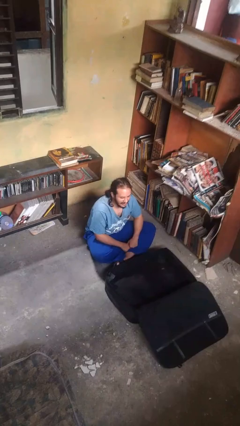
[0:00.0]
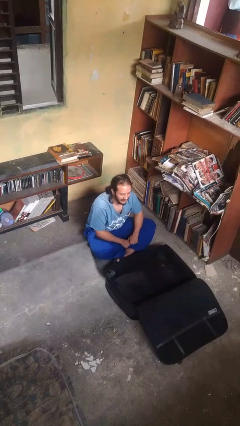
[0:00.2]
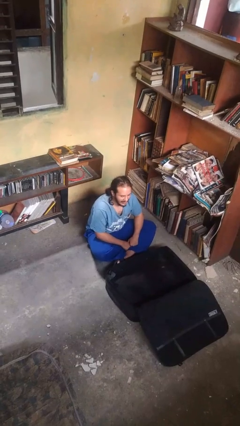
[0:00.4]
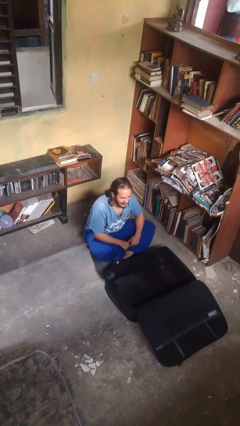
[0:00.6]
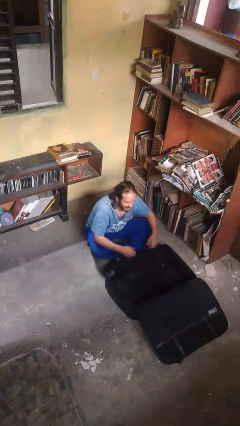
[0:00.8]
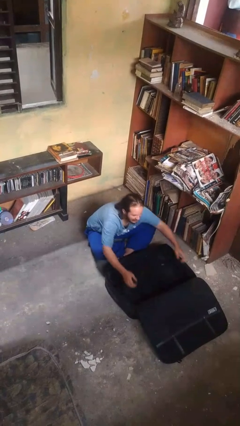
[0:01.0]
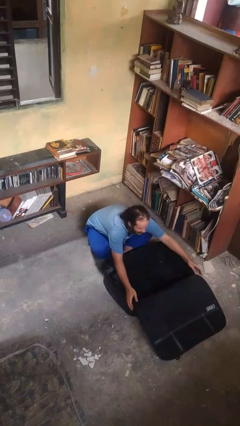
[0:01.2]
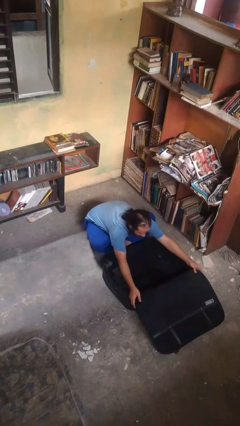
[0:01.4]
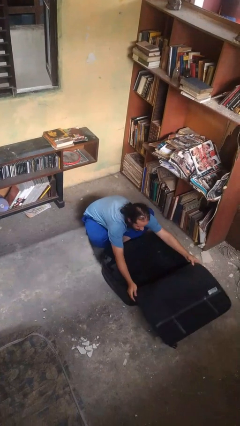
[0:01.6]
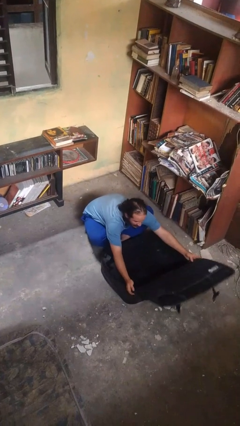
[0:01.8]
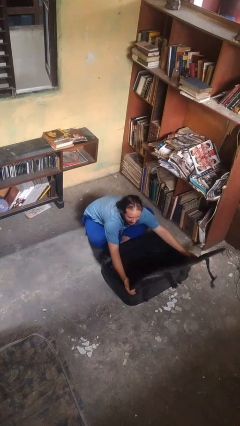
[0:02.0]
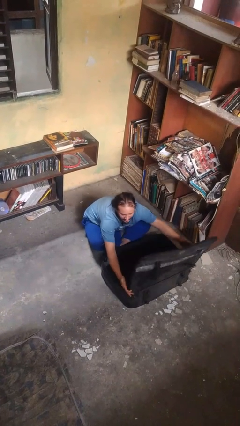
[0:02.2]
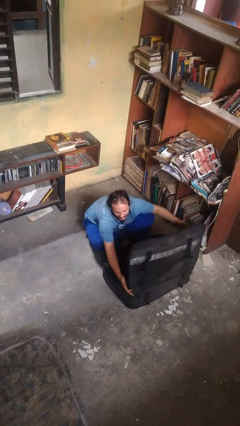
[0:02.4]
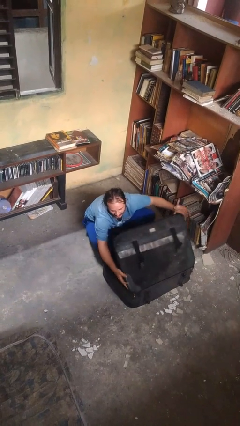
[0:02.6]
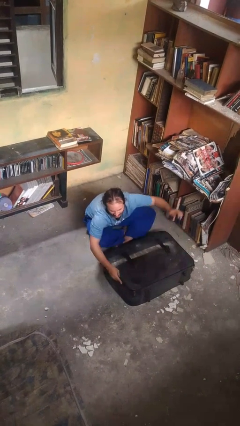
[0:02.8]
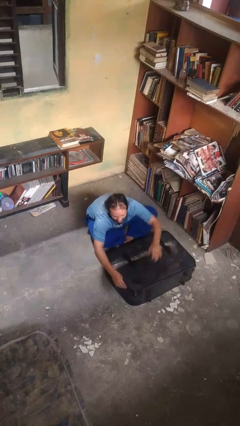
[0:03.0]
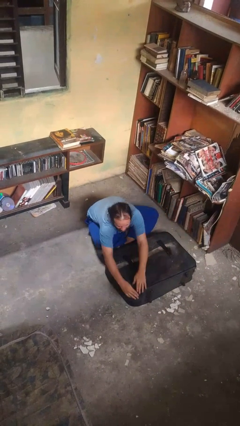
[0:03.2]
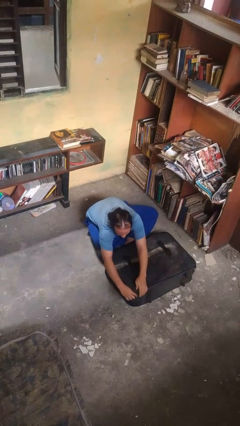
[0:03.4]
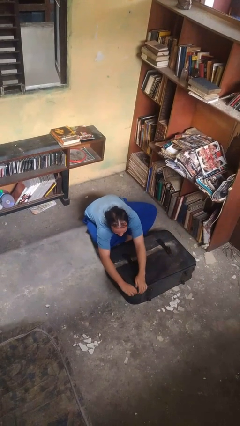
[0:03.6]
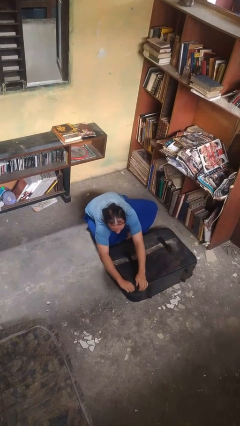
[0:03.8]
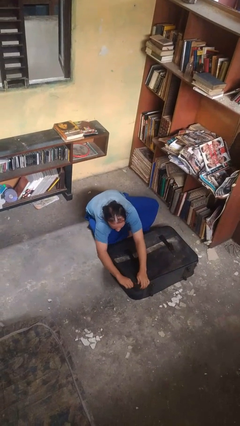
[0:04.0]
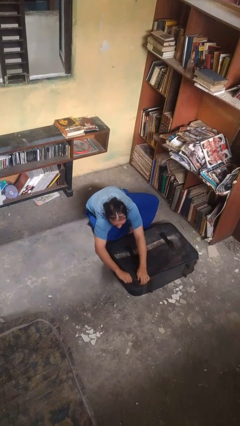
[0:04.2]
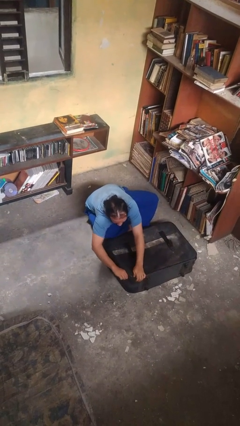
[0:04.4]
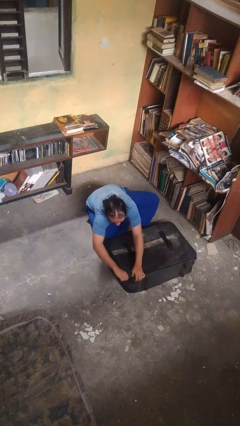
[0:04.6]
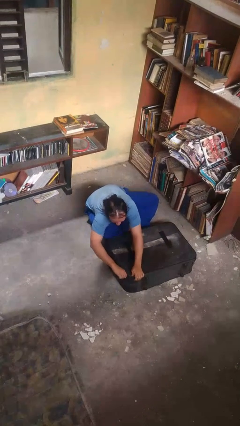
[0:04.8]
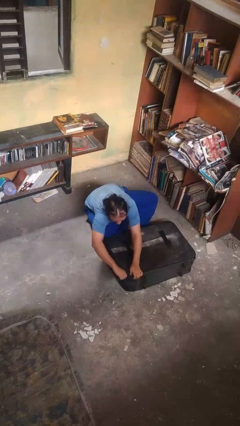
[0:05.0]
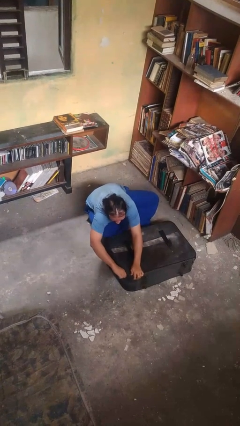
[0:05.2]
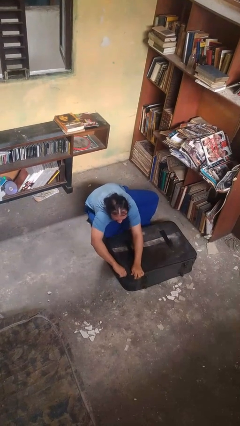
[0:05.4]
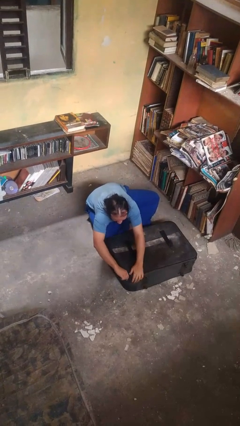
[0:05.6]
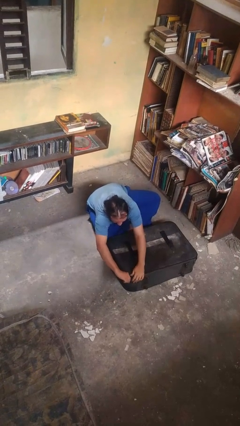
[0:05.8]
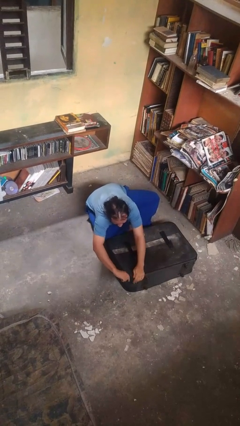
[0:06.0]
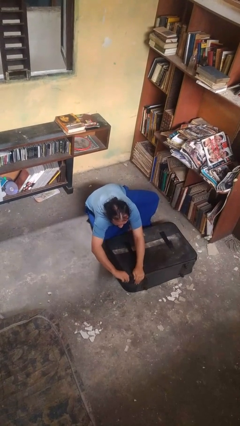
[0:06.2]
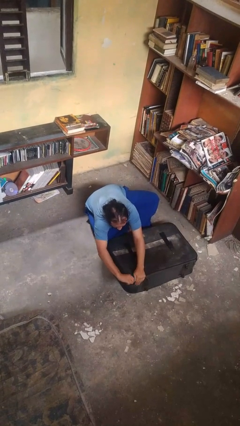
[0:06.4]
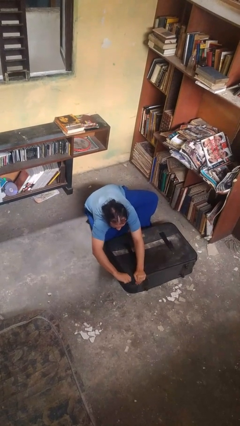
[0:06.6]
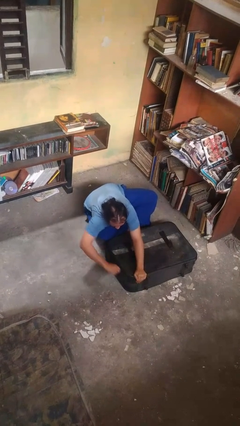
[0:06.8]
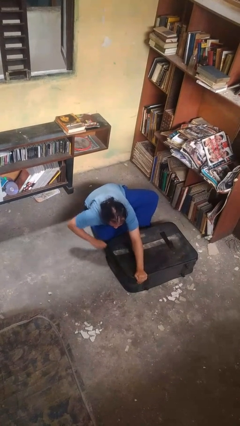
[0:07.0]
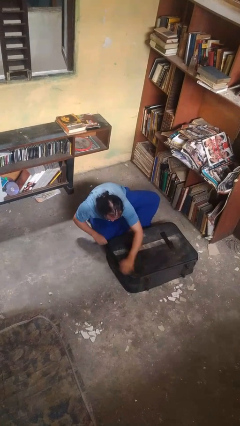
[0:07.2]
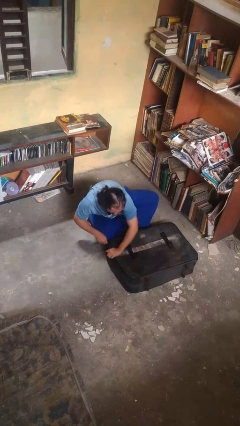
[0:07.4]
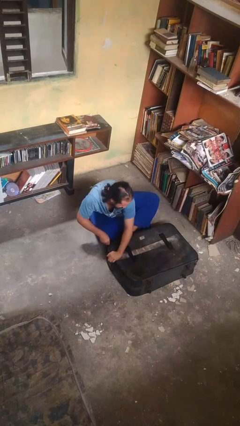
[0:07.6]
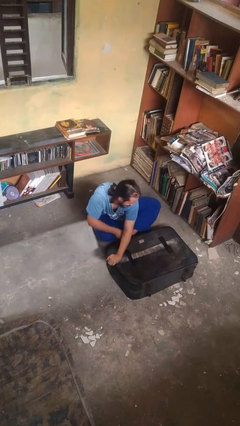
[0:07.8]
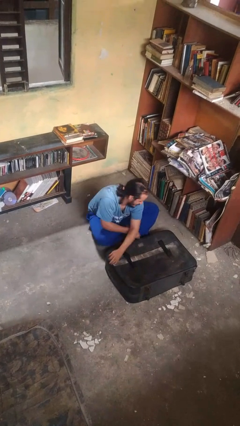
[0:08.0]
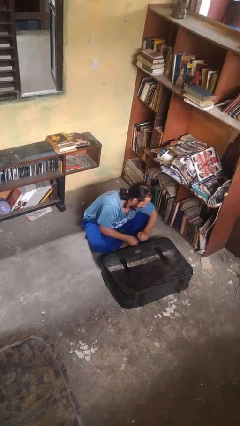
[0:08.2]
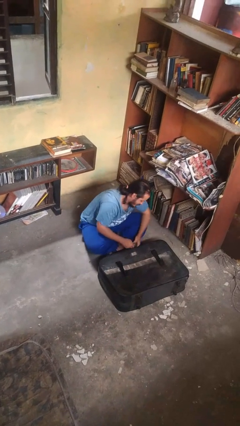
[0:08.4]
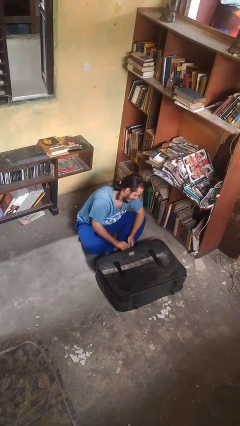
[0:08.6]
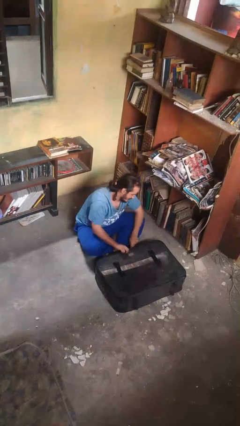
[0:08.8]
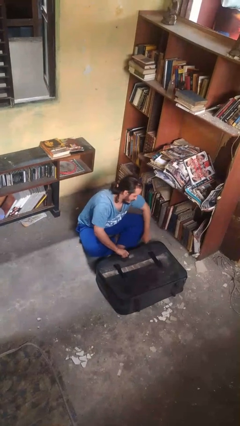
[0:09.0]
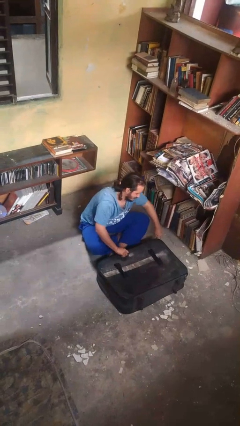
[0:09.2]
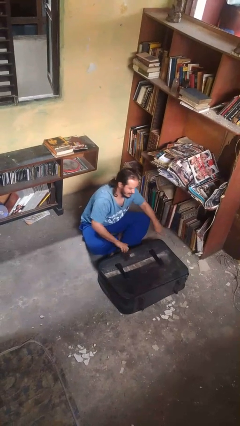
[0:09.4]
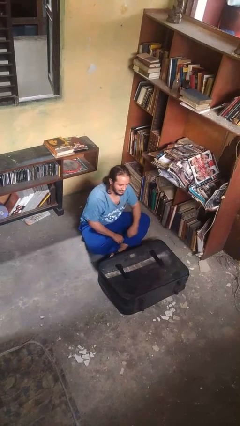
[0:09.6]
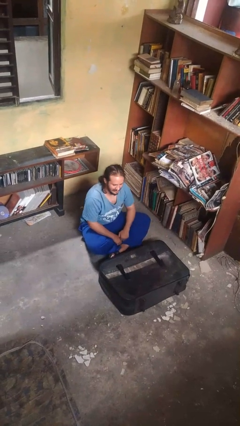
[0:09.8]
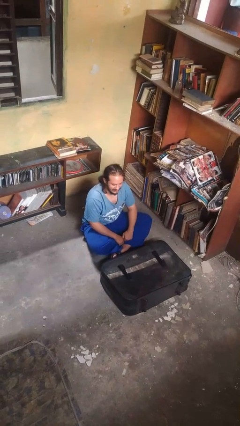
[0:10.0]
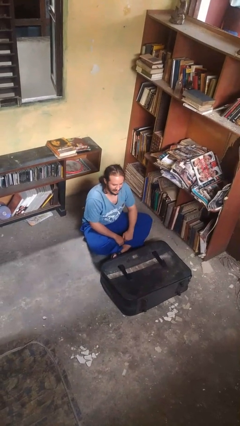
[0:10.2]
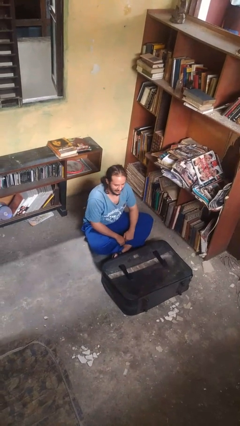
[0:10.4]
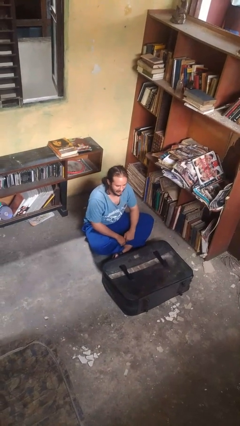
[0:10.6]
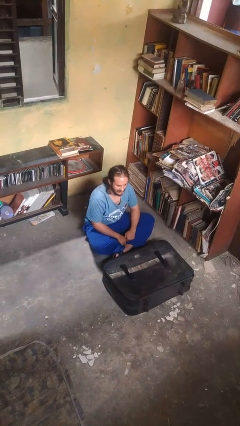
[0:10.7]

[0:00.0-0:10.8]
person closes suitcase

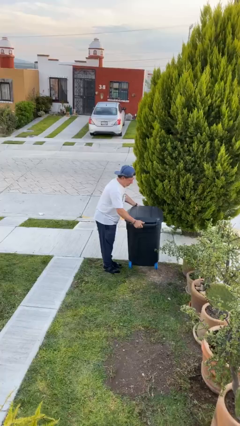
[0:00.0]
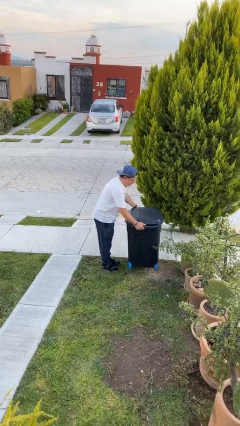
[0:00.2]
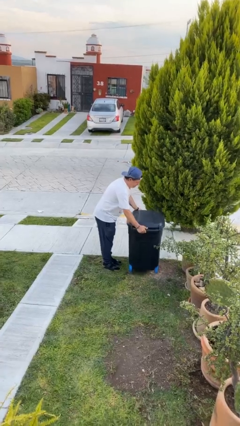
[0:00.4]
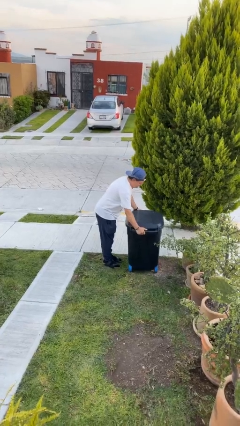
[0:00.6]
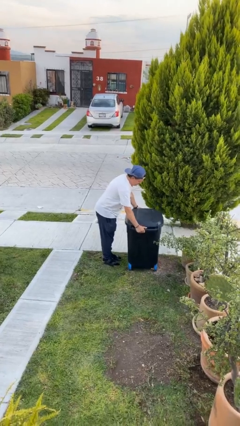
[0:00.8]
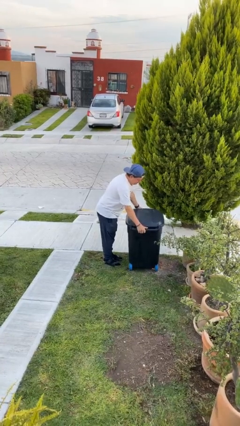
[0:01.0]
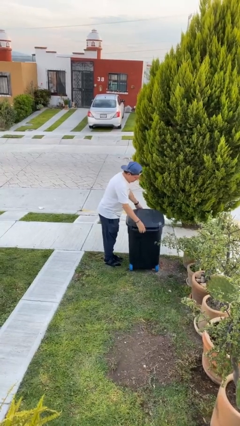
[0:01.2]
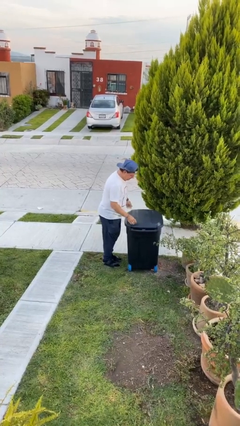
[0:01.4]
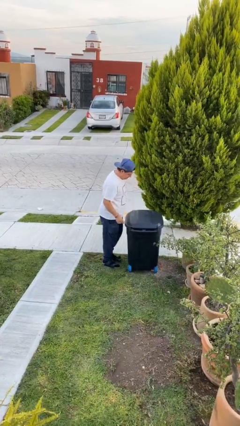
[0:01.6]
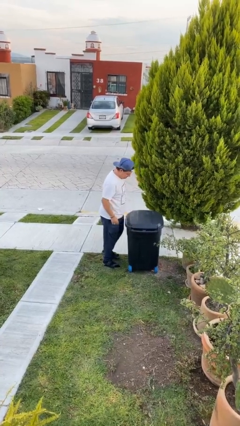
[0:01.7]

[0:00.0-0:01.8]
person puts down object on floor

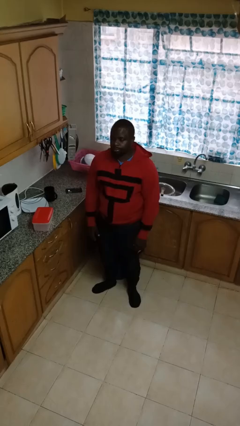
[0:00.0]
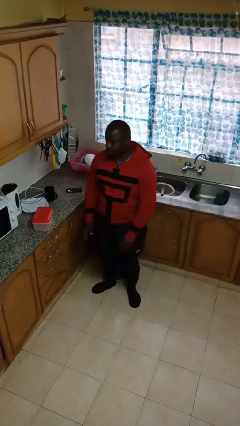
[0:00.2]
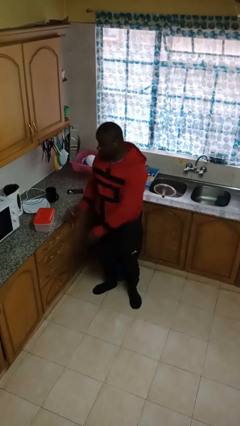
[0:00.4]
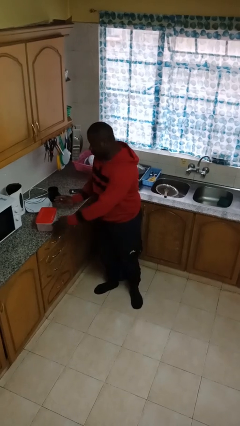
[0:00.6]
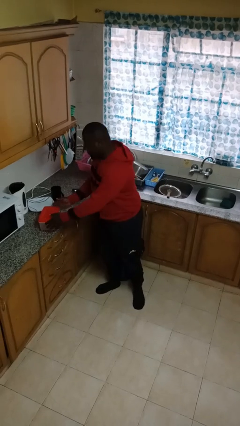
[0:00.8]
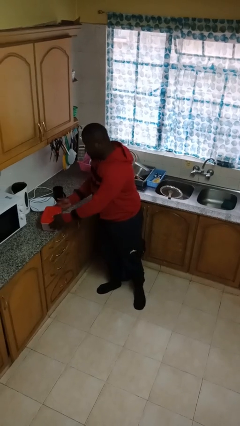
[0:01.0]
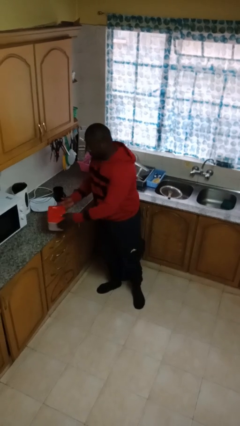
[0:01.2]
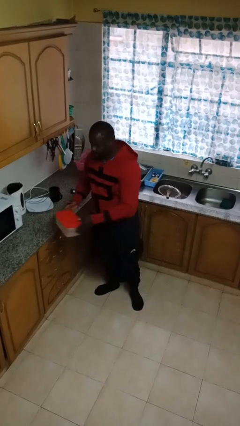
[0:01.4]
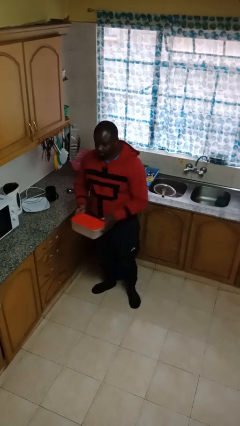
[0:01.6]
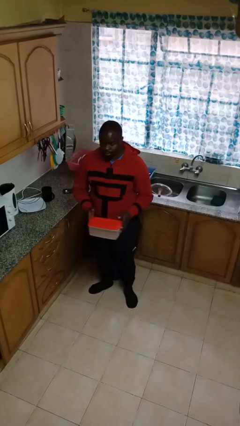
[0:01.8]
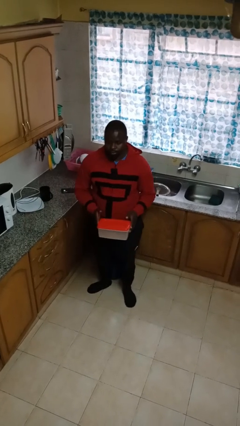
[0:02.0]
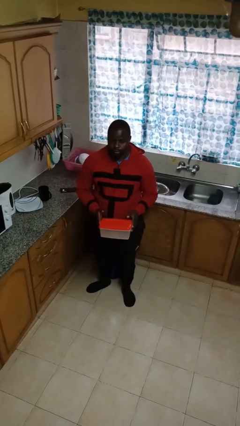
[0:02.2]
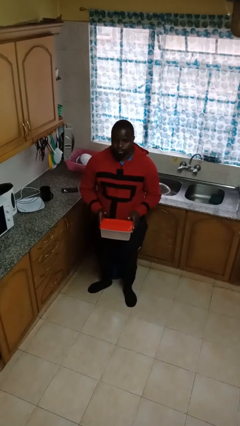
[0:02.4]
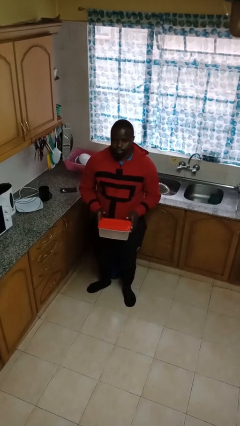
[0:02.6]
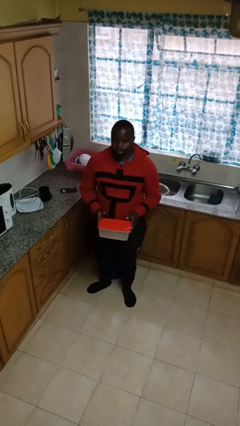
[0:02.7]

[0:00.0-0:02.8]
person picks up object from countertop

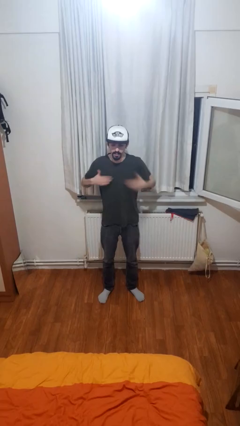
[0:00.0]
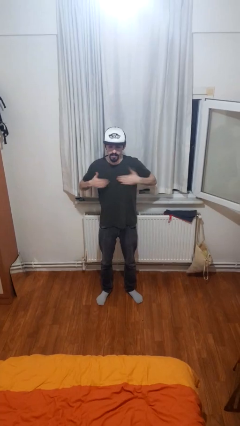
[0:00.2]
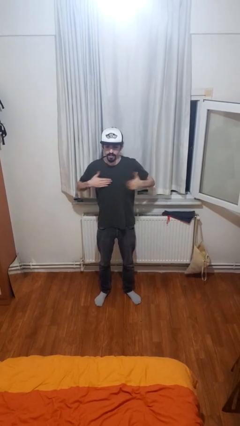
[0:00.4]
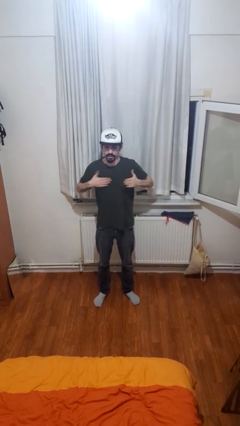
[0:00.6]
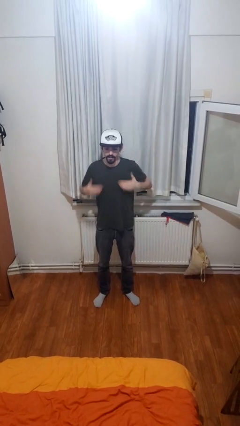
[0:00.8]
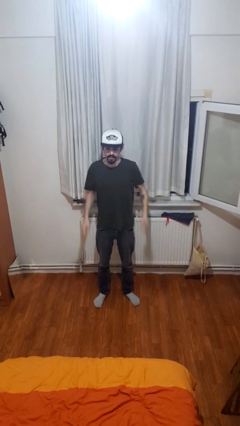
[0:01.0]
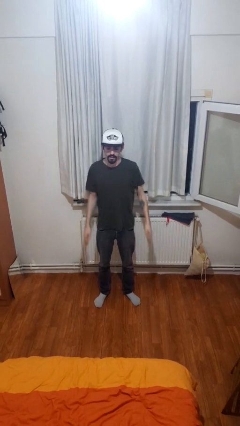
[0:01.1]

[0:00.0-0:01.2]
person drums on chest

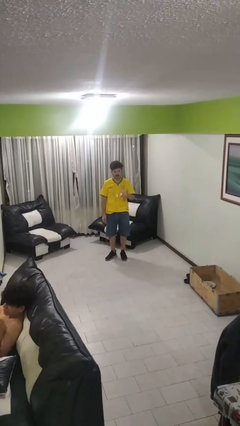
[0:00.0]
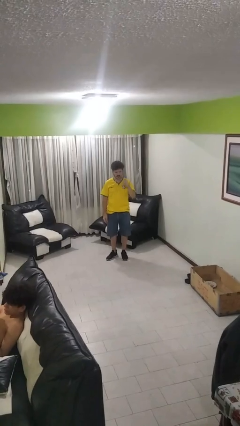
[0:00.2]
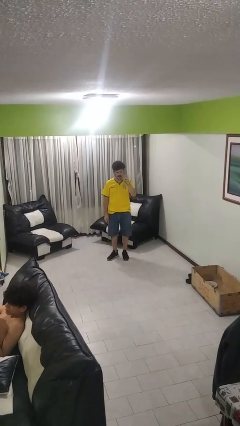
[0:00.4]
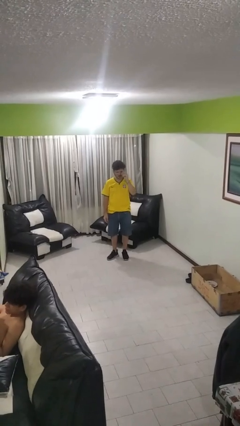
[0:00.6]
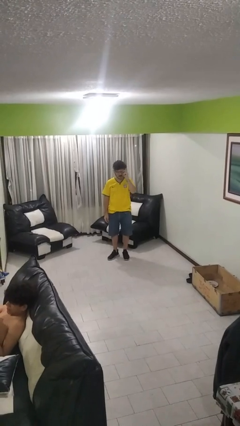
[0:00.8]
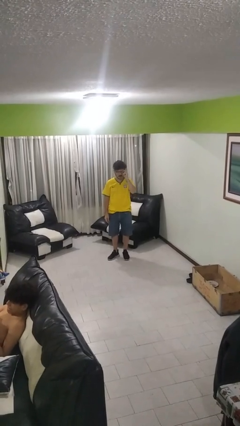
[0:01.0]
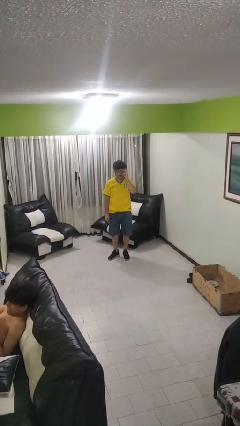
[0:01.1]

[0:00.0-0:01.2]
person puts on glasses
